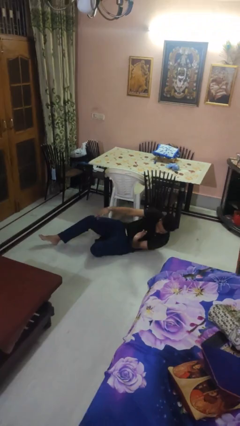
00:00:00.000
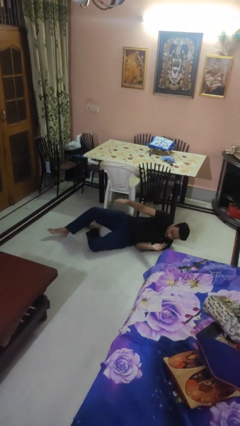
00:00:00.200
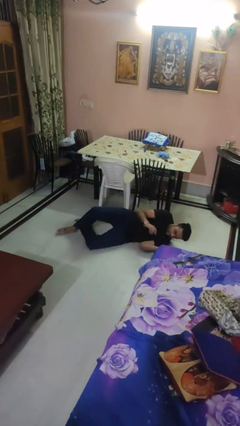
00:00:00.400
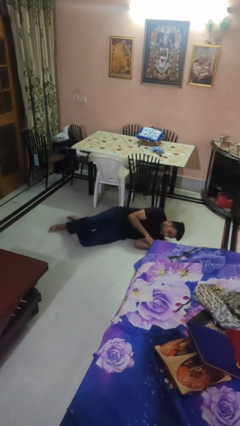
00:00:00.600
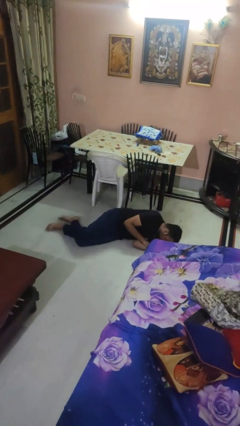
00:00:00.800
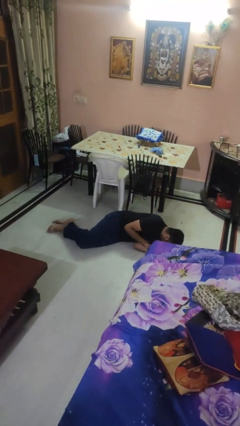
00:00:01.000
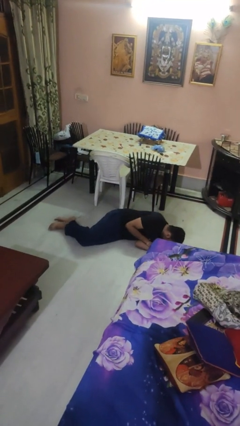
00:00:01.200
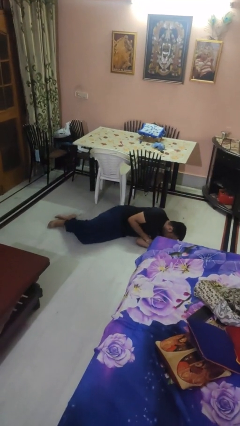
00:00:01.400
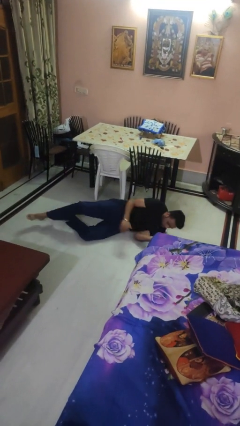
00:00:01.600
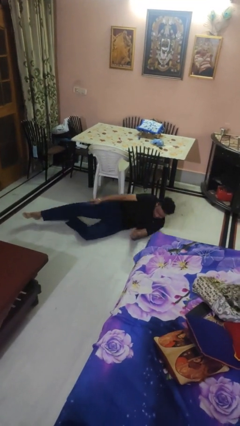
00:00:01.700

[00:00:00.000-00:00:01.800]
person lies down on floor

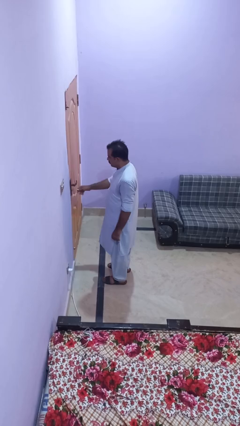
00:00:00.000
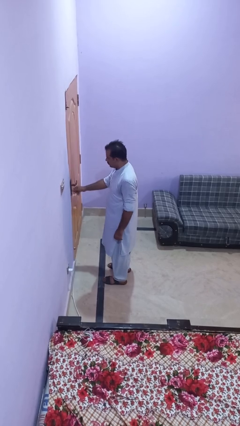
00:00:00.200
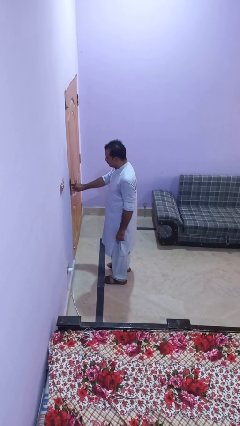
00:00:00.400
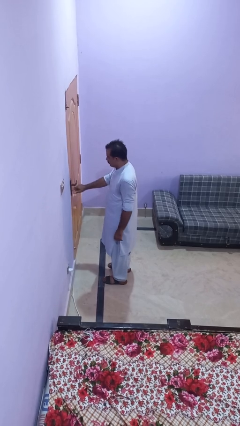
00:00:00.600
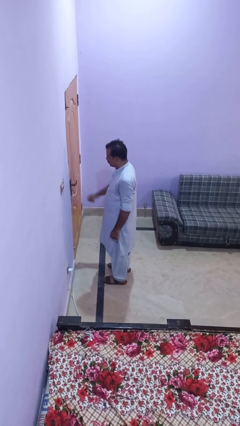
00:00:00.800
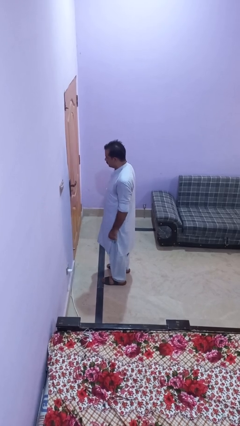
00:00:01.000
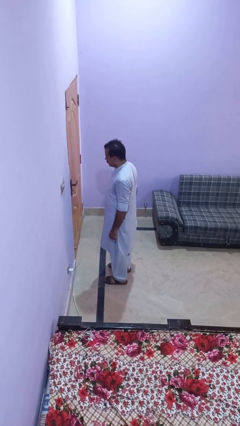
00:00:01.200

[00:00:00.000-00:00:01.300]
person locks door with keys

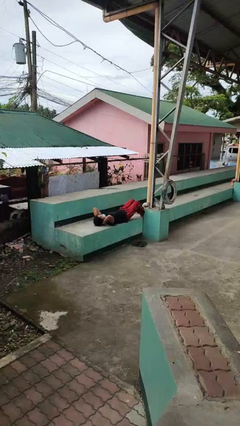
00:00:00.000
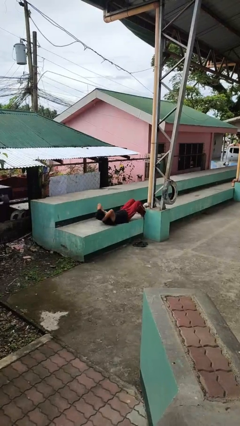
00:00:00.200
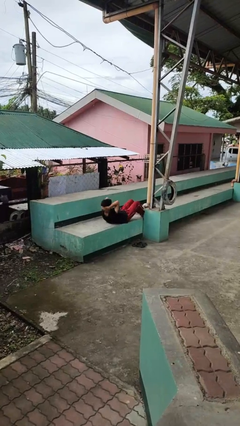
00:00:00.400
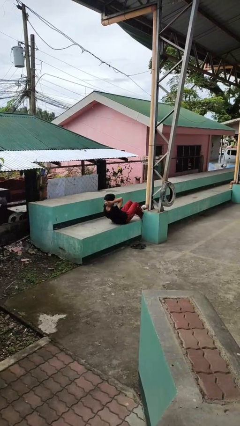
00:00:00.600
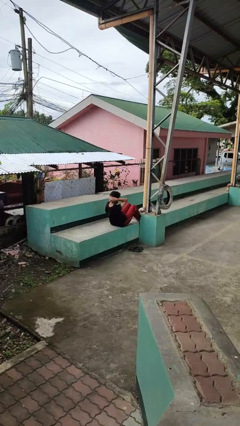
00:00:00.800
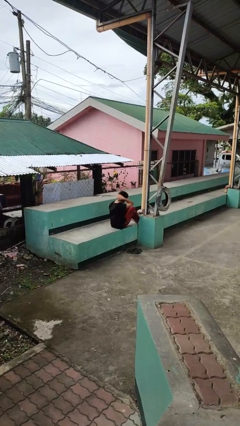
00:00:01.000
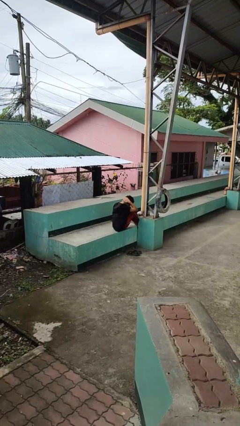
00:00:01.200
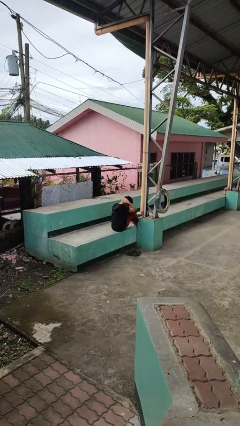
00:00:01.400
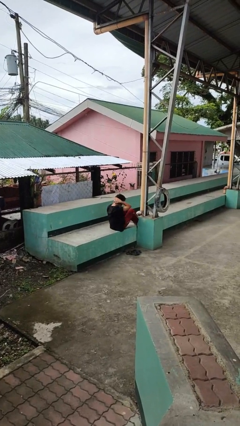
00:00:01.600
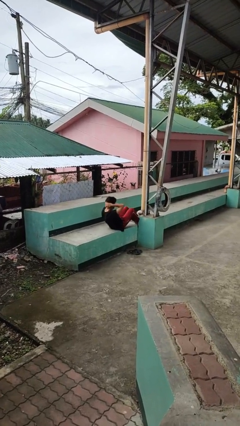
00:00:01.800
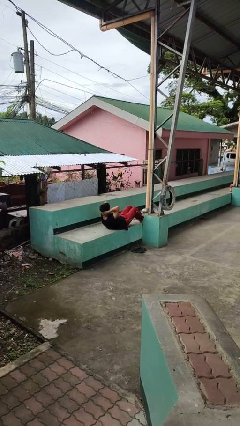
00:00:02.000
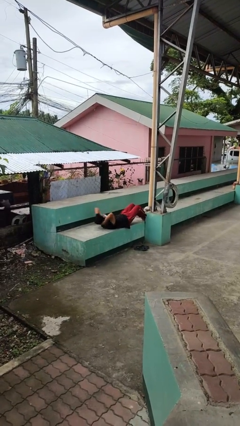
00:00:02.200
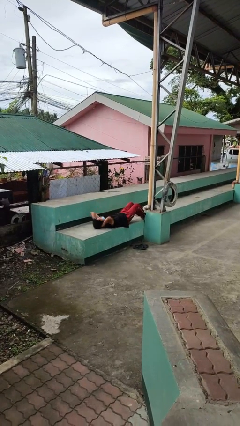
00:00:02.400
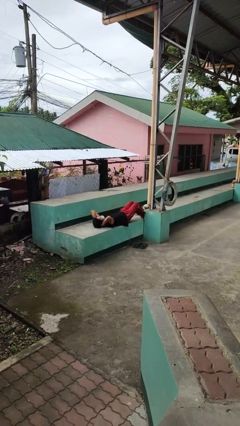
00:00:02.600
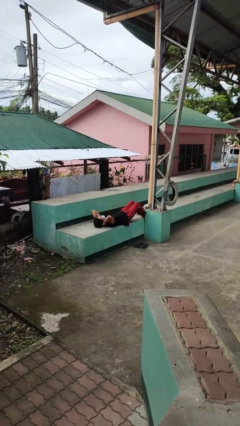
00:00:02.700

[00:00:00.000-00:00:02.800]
person exercises with situp

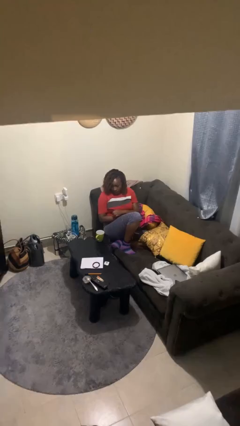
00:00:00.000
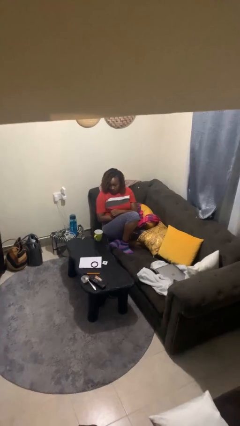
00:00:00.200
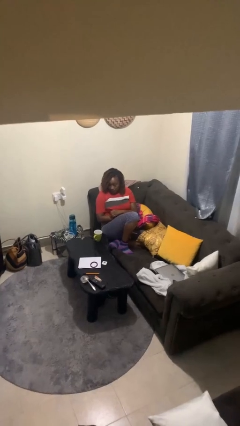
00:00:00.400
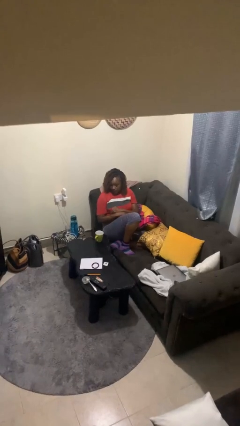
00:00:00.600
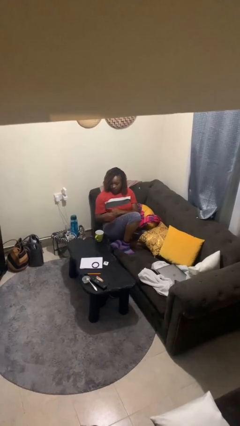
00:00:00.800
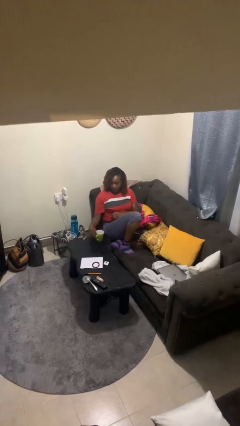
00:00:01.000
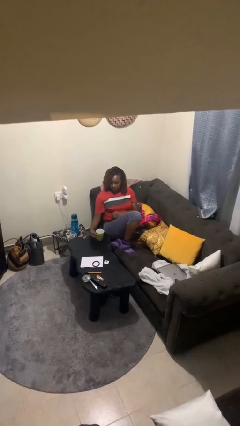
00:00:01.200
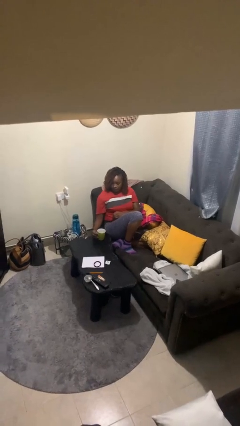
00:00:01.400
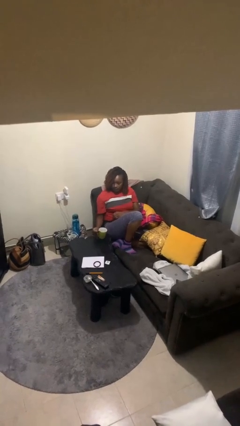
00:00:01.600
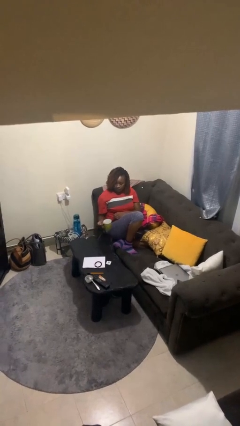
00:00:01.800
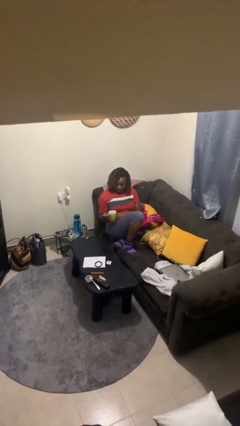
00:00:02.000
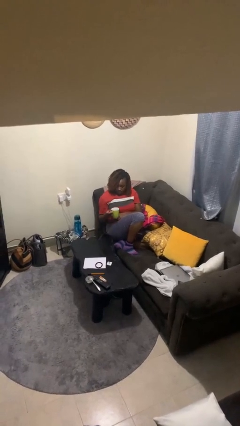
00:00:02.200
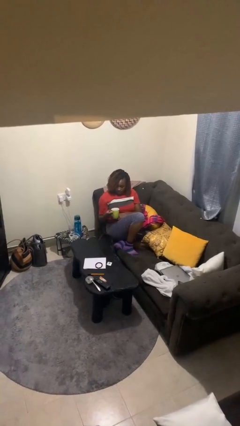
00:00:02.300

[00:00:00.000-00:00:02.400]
person picks up object from table

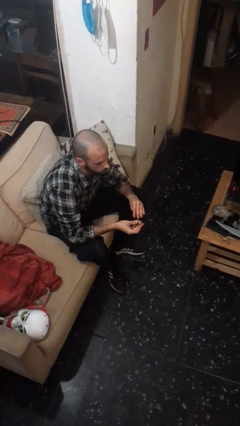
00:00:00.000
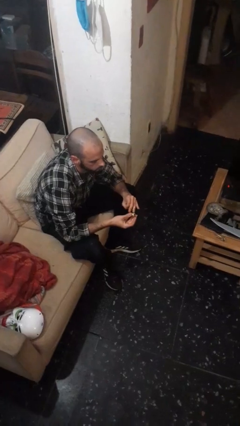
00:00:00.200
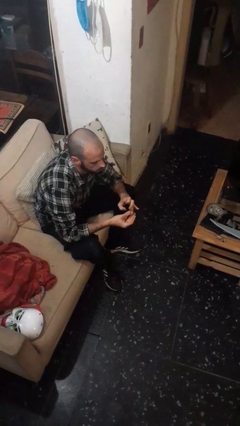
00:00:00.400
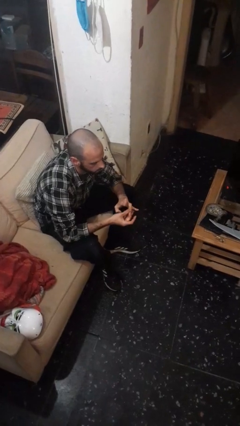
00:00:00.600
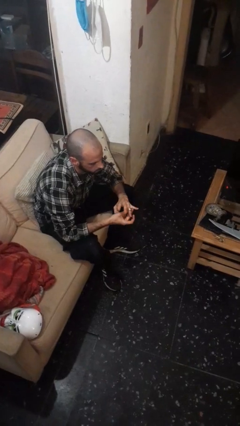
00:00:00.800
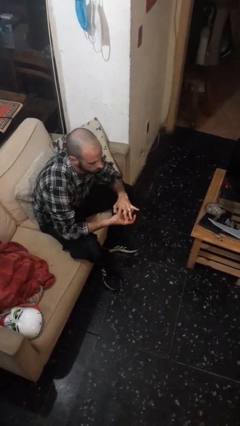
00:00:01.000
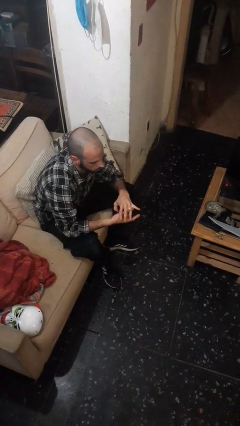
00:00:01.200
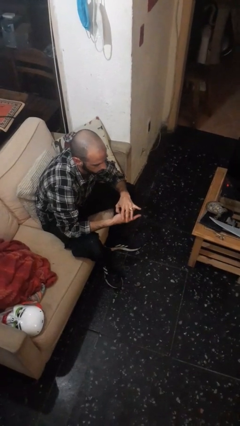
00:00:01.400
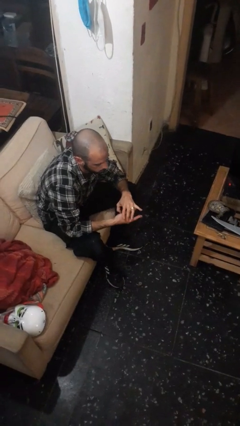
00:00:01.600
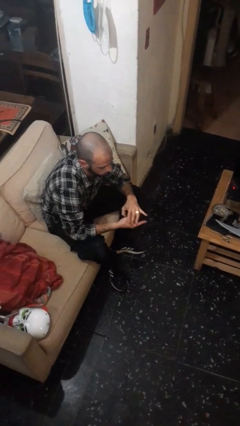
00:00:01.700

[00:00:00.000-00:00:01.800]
person puts on ring

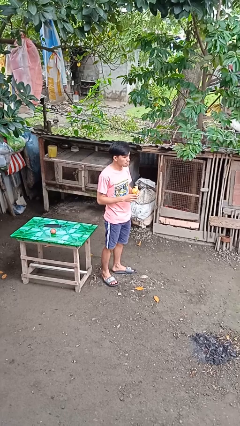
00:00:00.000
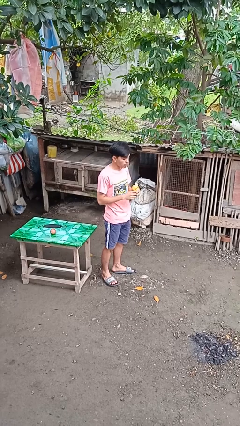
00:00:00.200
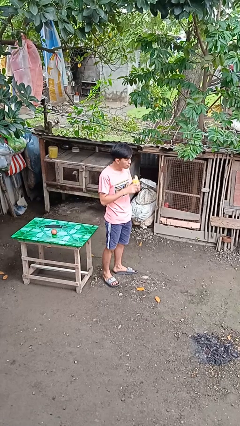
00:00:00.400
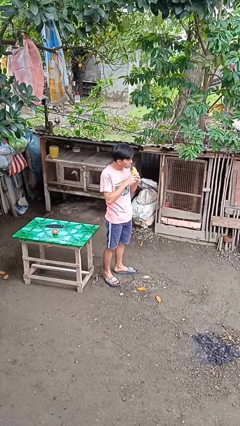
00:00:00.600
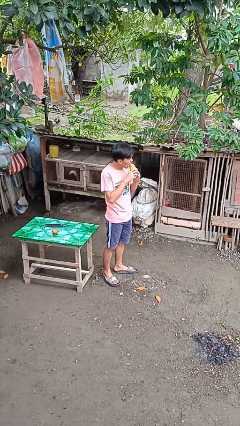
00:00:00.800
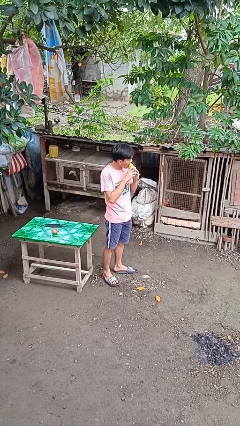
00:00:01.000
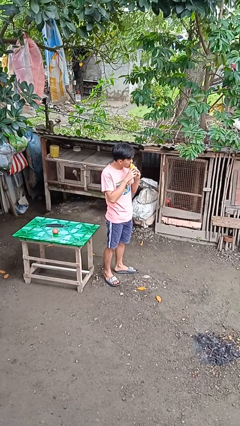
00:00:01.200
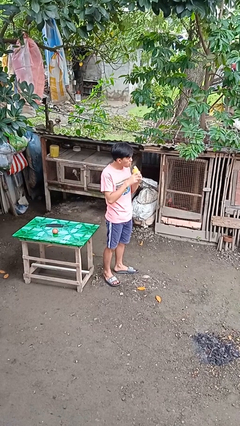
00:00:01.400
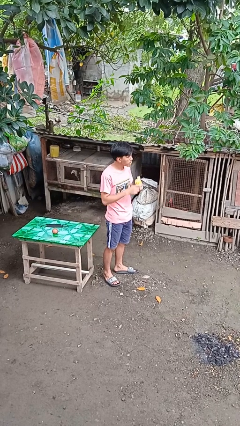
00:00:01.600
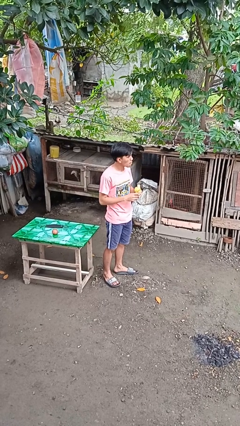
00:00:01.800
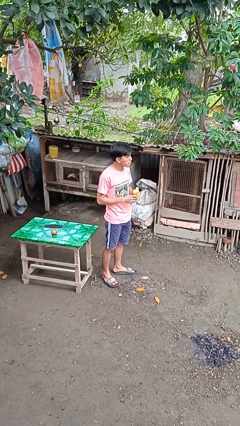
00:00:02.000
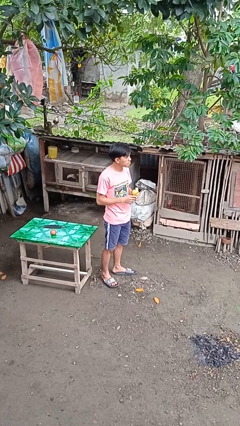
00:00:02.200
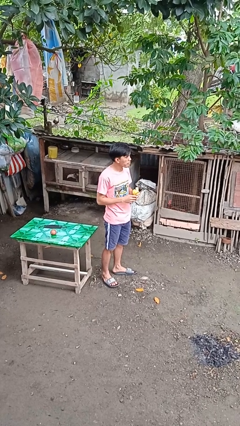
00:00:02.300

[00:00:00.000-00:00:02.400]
person eats banana

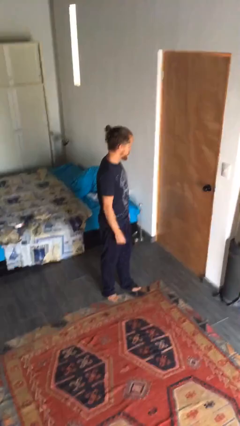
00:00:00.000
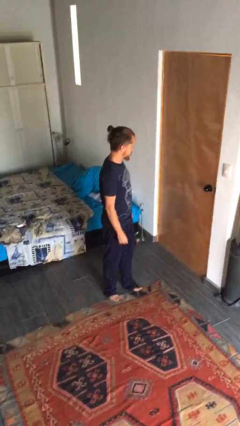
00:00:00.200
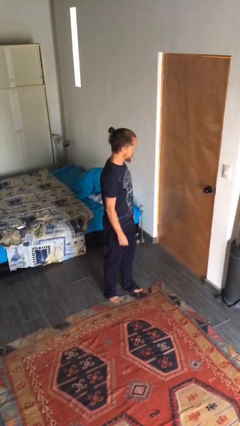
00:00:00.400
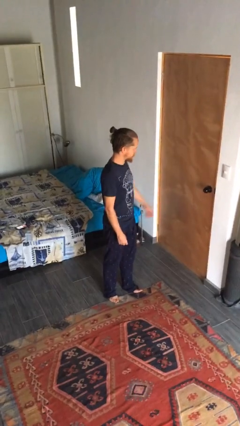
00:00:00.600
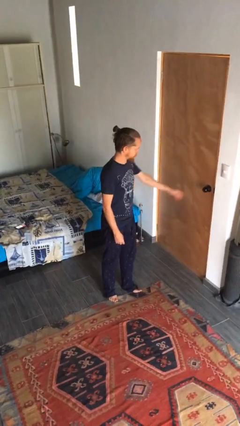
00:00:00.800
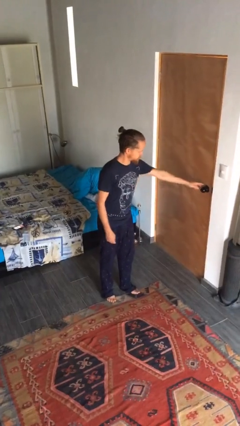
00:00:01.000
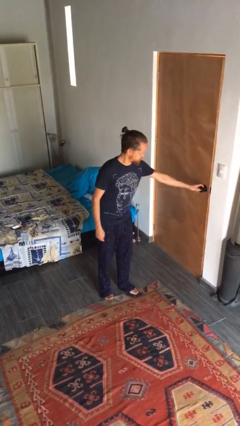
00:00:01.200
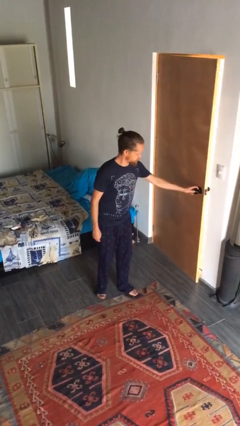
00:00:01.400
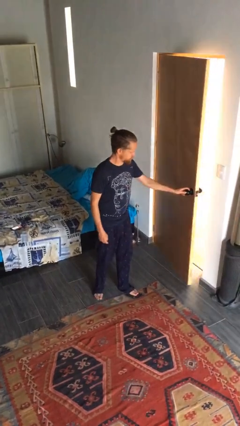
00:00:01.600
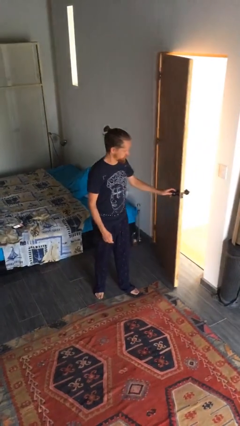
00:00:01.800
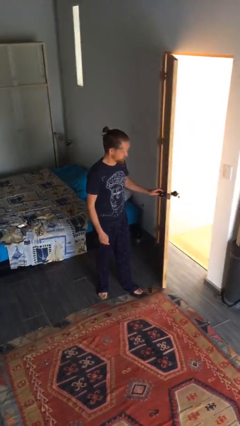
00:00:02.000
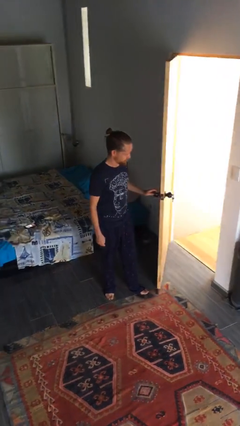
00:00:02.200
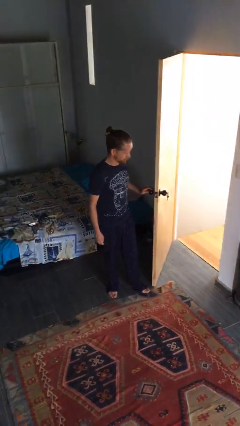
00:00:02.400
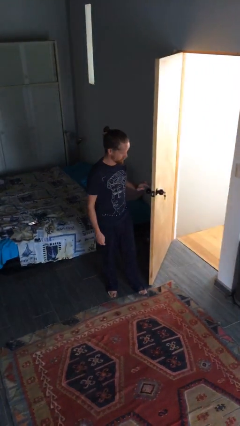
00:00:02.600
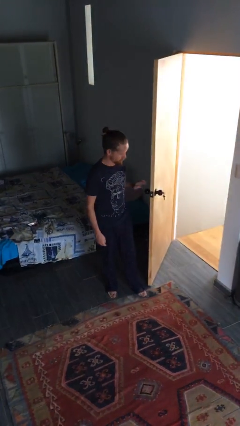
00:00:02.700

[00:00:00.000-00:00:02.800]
person opens facility door

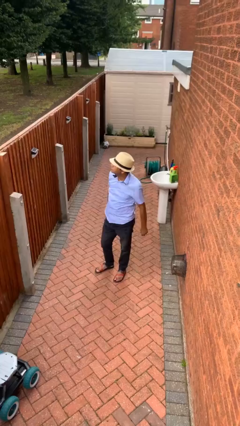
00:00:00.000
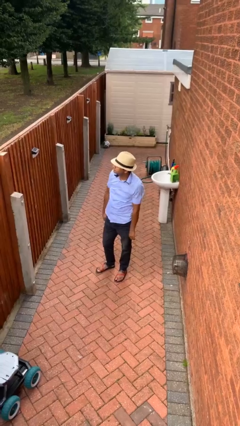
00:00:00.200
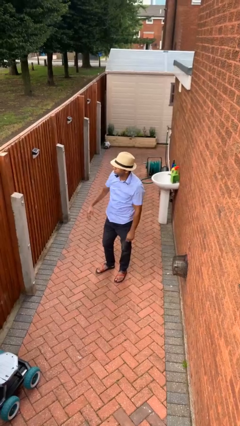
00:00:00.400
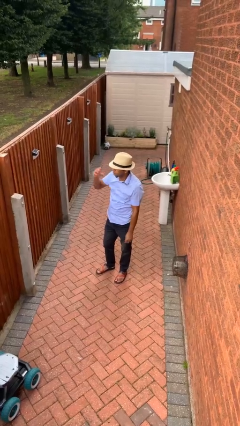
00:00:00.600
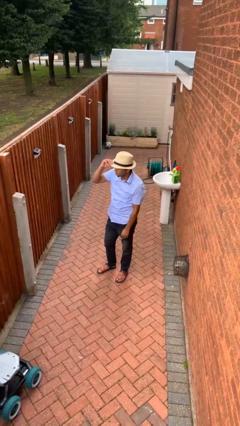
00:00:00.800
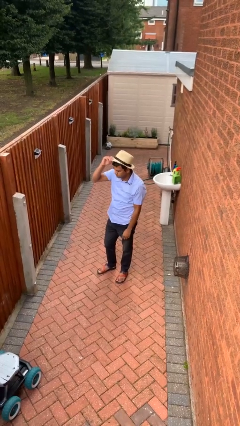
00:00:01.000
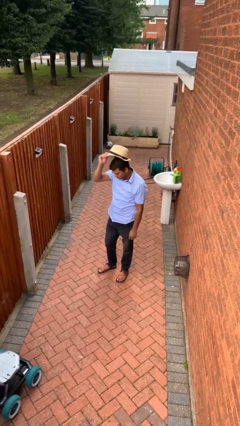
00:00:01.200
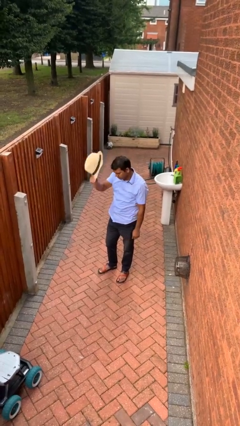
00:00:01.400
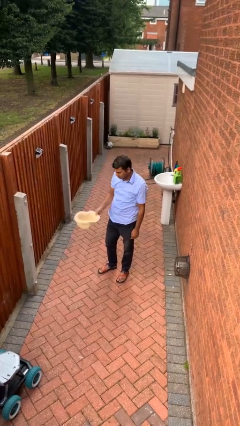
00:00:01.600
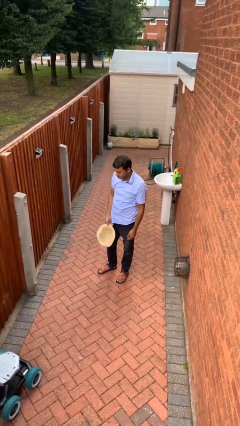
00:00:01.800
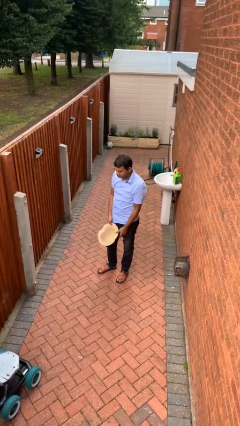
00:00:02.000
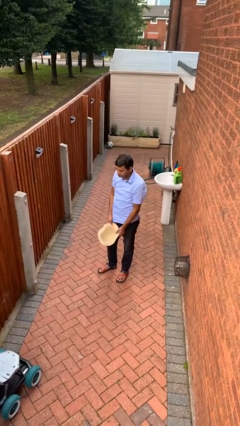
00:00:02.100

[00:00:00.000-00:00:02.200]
person takes off hat
